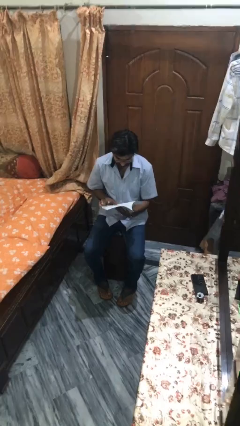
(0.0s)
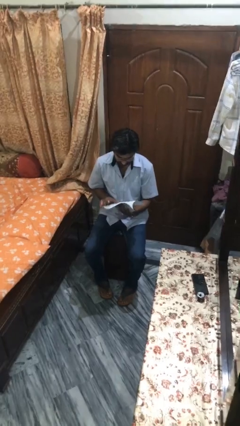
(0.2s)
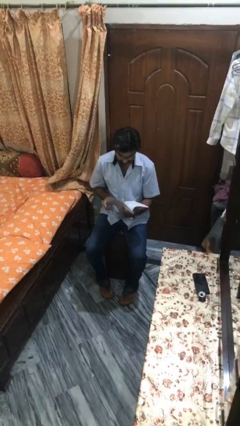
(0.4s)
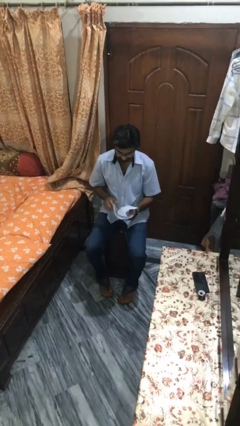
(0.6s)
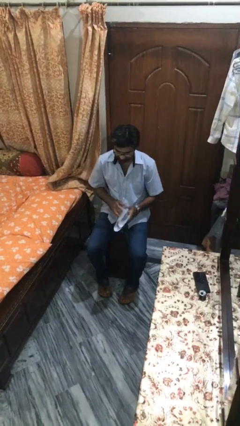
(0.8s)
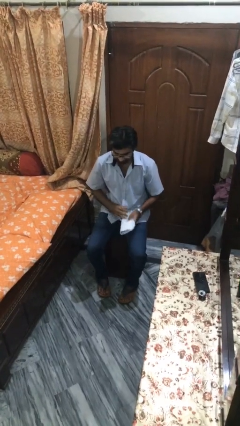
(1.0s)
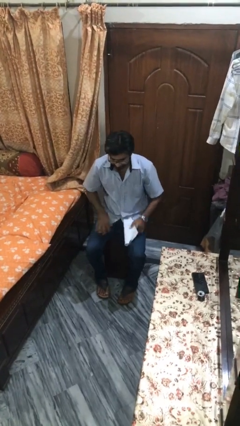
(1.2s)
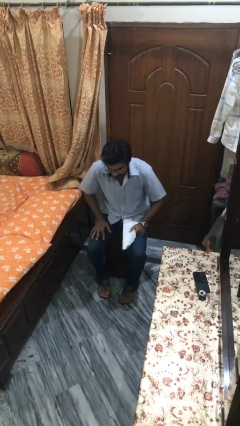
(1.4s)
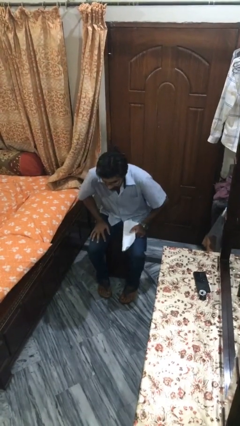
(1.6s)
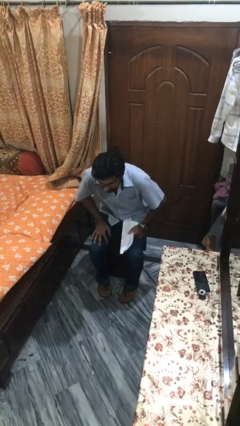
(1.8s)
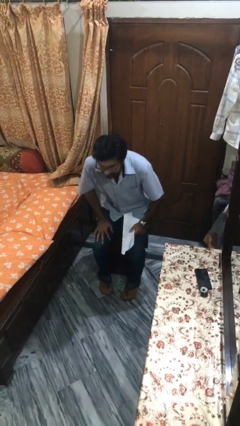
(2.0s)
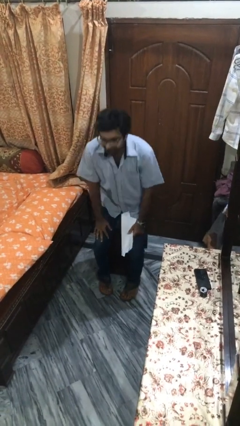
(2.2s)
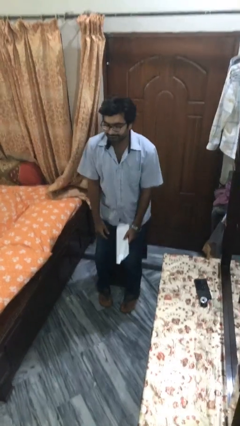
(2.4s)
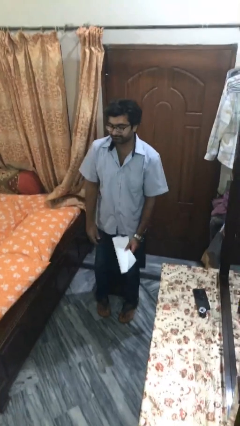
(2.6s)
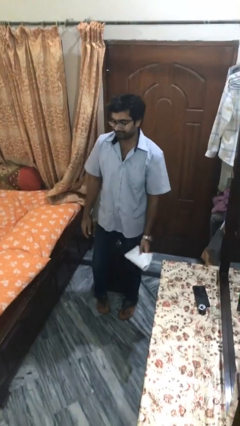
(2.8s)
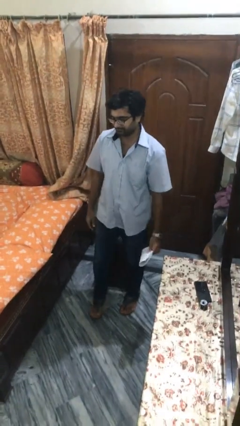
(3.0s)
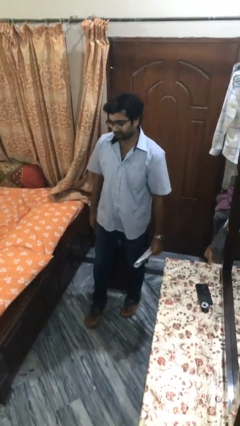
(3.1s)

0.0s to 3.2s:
person stands up

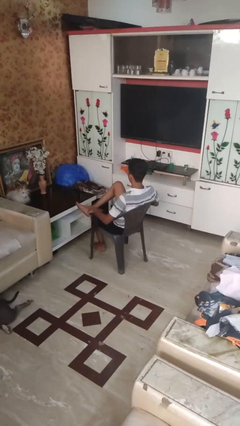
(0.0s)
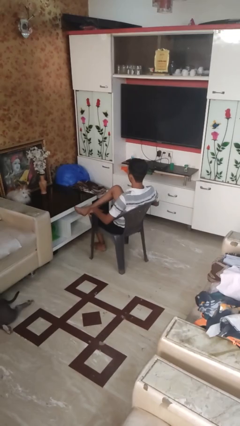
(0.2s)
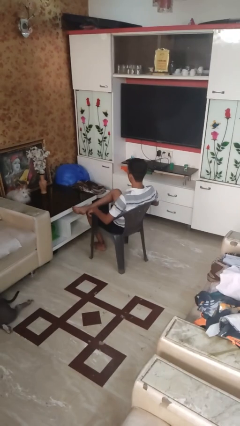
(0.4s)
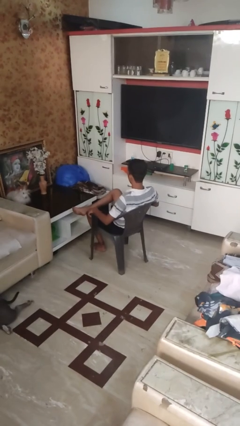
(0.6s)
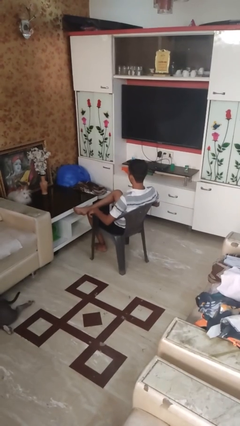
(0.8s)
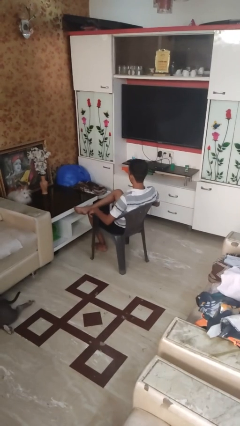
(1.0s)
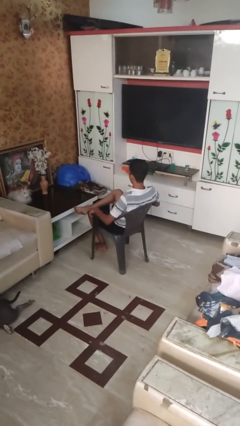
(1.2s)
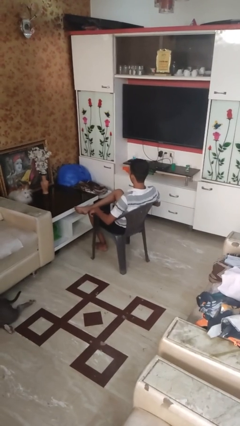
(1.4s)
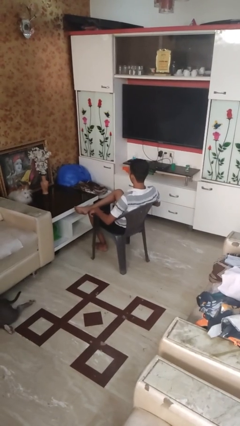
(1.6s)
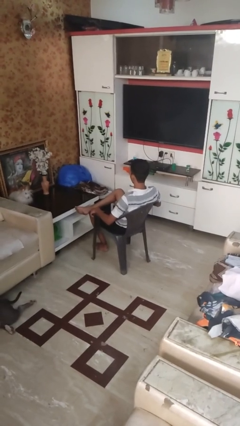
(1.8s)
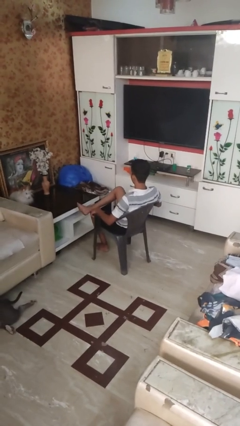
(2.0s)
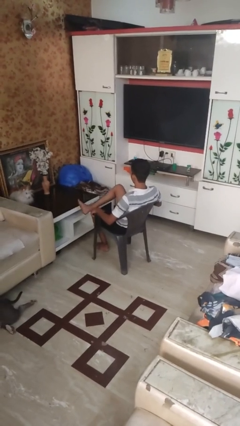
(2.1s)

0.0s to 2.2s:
person crosses legs

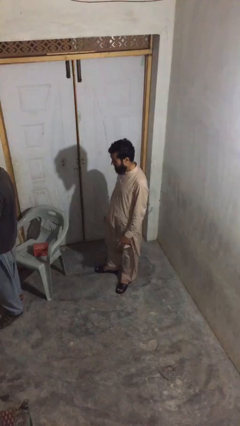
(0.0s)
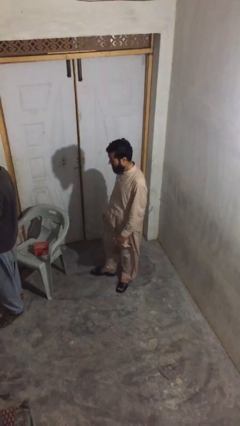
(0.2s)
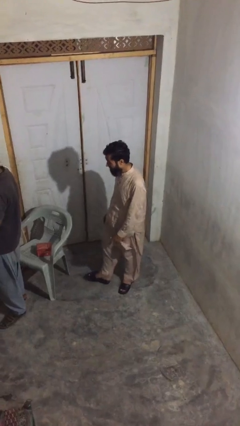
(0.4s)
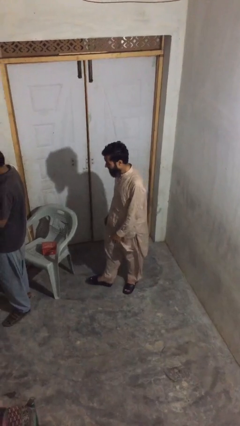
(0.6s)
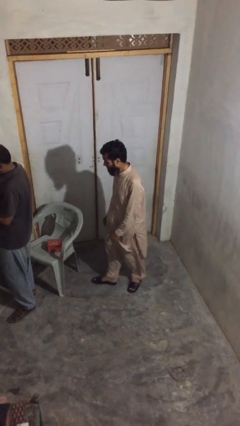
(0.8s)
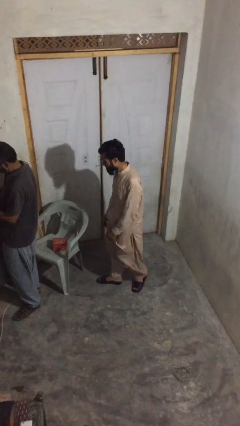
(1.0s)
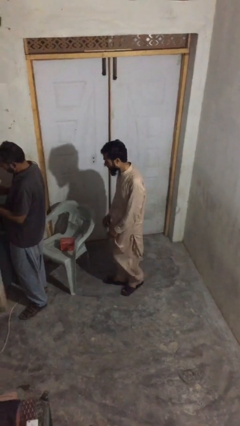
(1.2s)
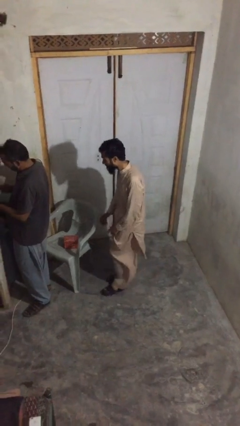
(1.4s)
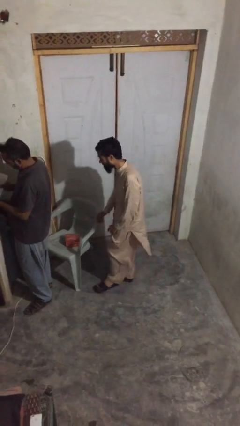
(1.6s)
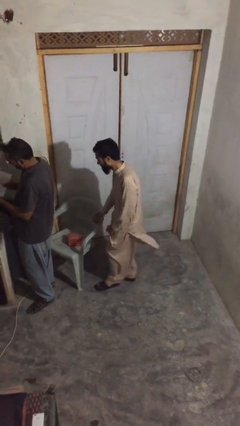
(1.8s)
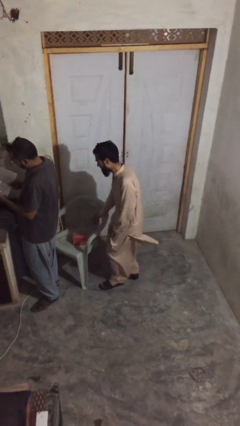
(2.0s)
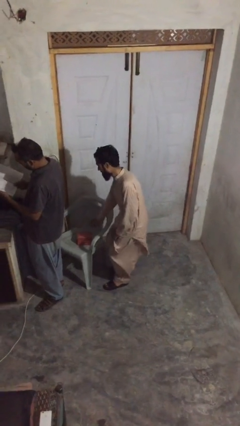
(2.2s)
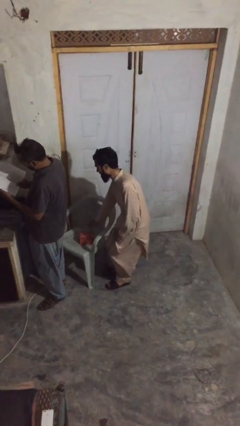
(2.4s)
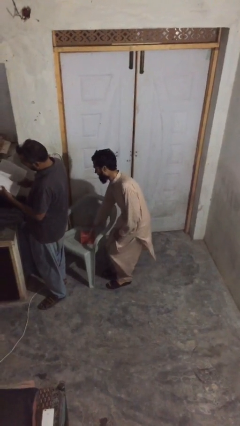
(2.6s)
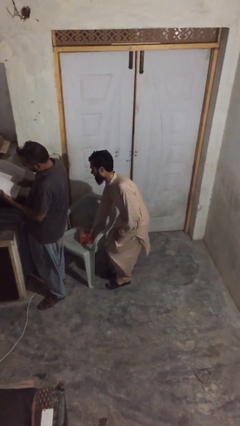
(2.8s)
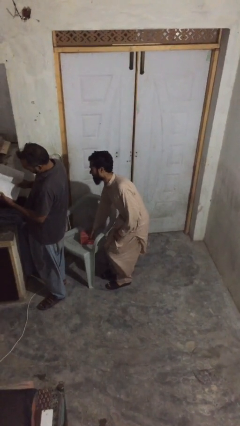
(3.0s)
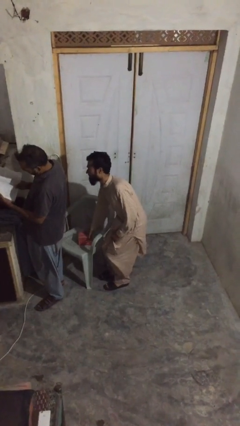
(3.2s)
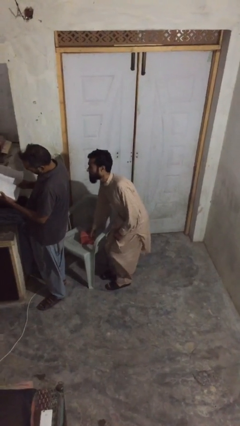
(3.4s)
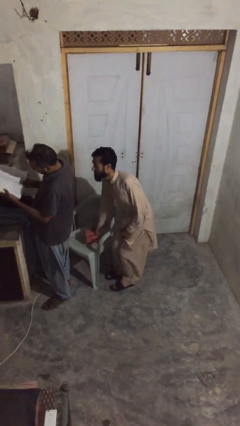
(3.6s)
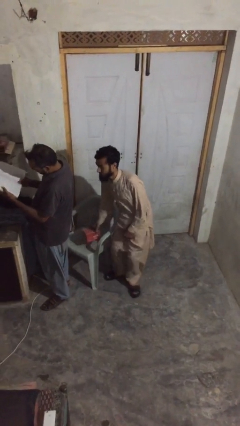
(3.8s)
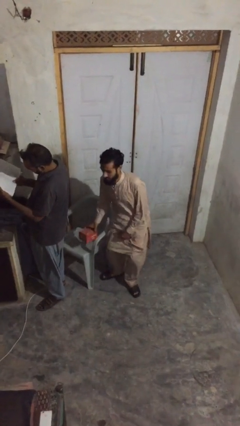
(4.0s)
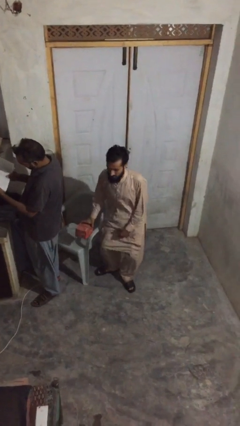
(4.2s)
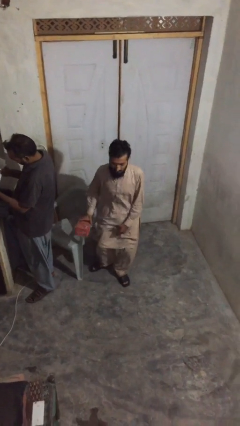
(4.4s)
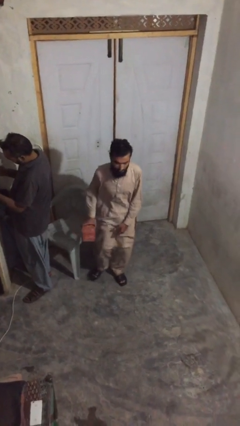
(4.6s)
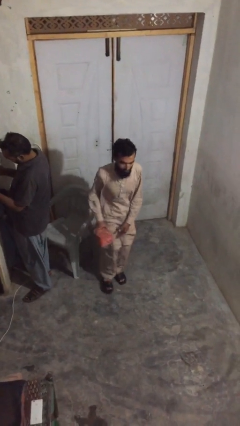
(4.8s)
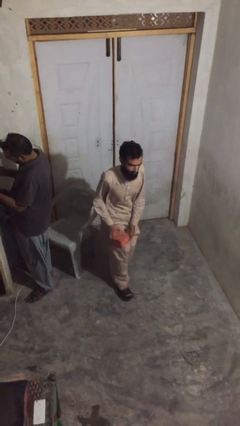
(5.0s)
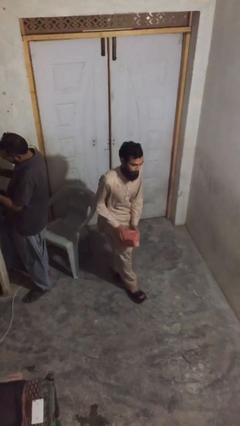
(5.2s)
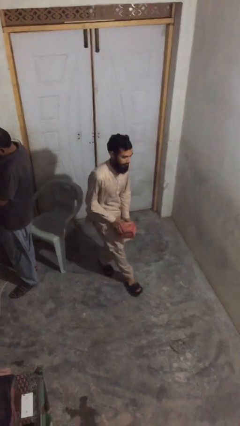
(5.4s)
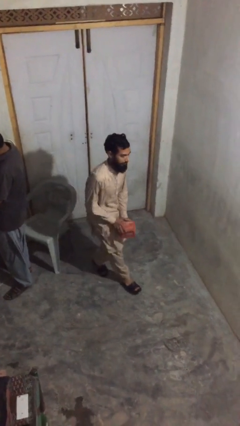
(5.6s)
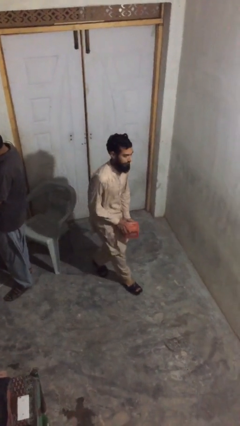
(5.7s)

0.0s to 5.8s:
person steals object from person

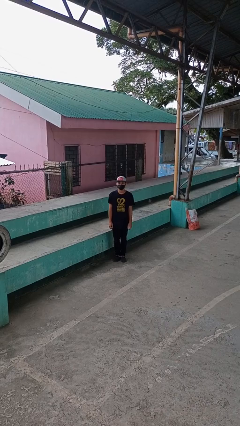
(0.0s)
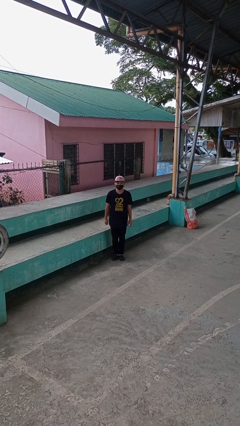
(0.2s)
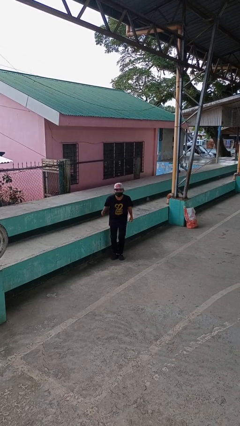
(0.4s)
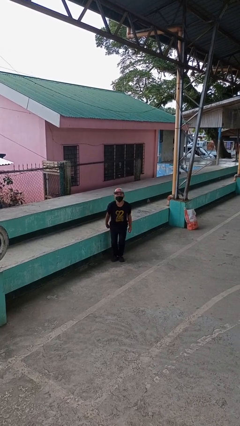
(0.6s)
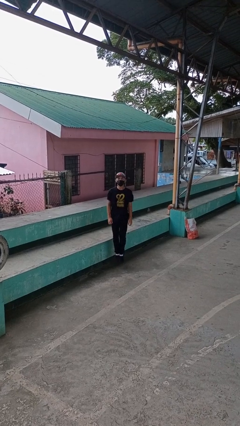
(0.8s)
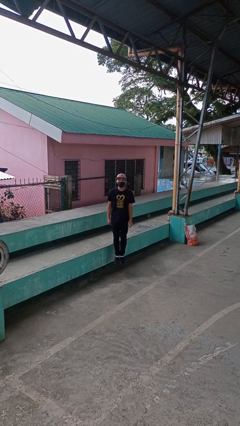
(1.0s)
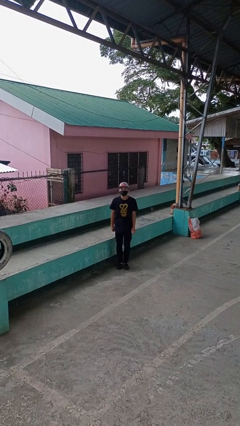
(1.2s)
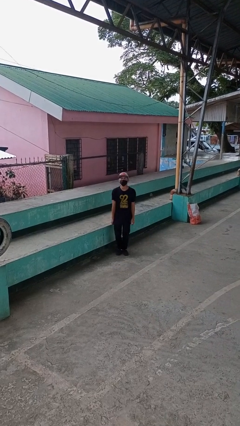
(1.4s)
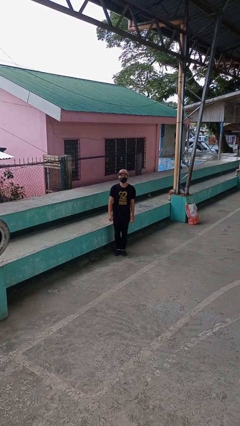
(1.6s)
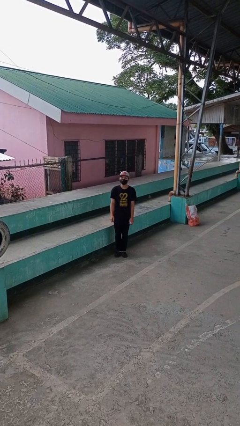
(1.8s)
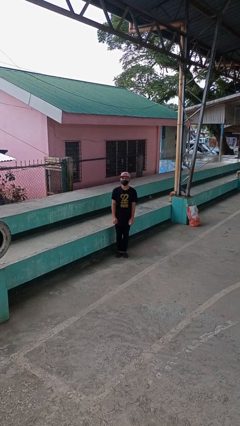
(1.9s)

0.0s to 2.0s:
person jumps

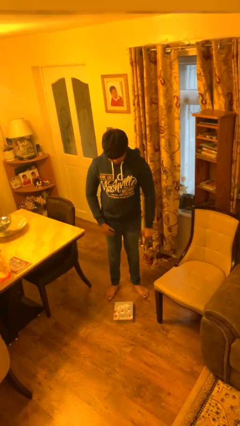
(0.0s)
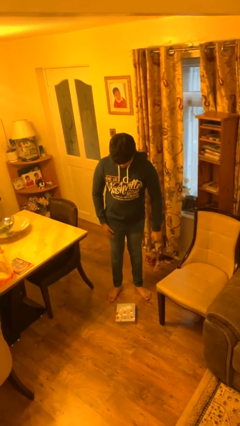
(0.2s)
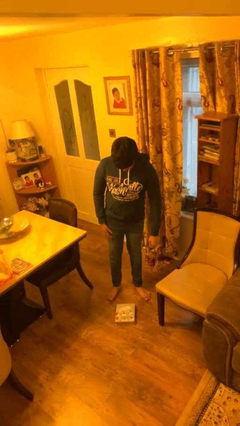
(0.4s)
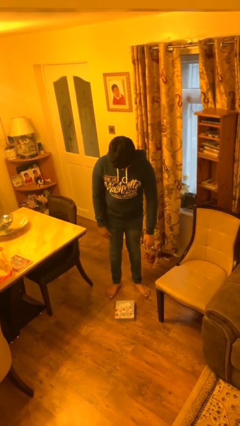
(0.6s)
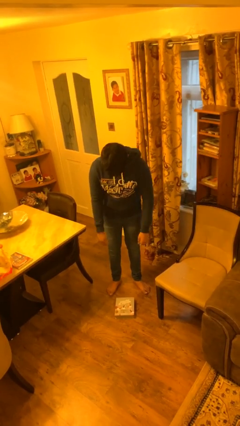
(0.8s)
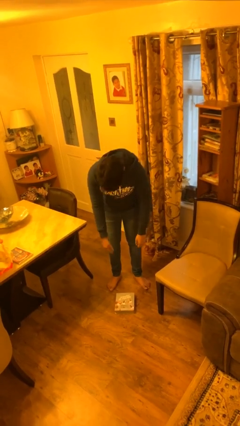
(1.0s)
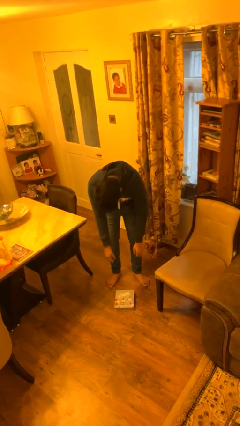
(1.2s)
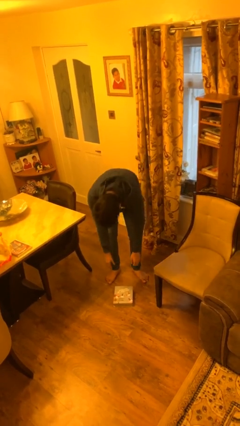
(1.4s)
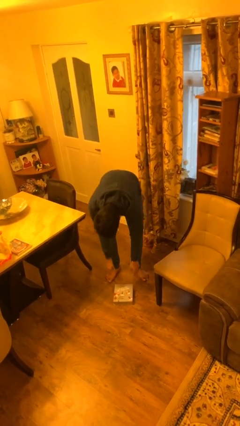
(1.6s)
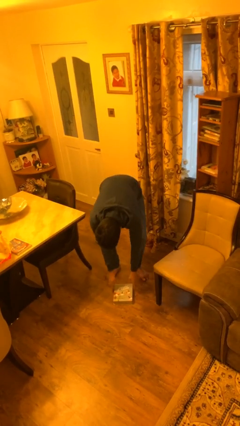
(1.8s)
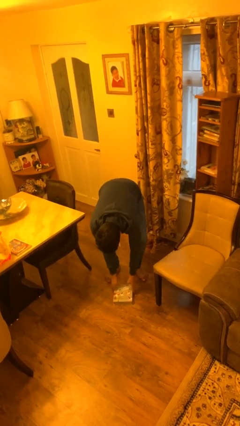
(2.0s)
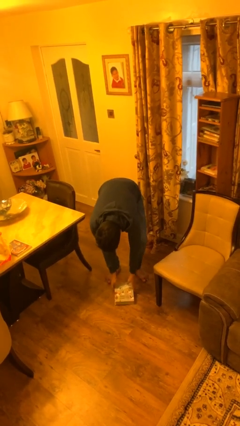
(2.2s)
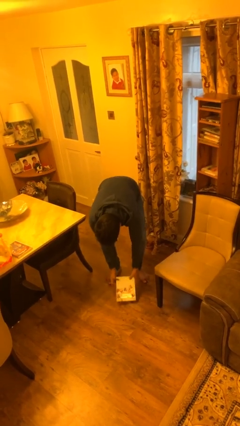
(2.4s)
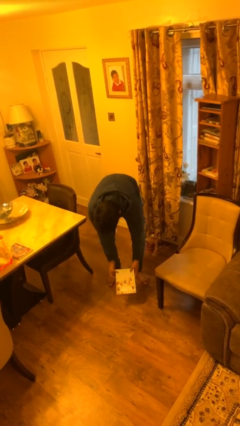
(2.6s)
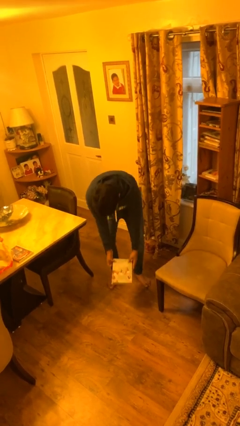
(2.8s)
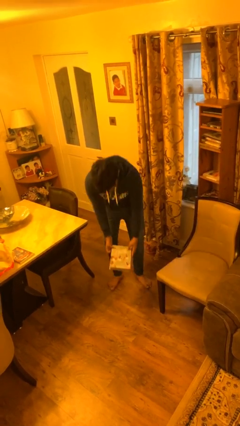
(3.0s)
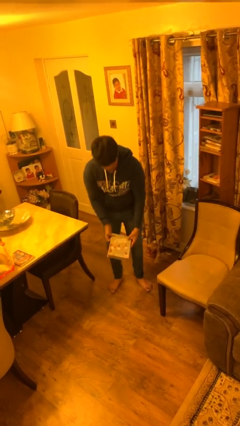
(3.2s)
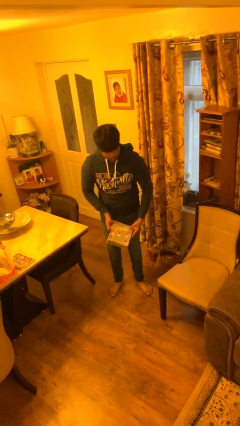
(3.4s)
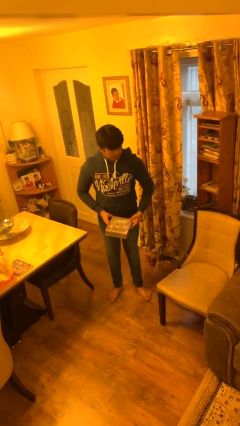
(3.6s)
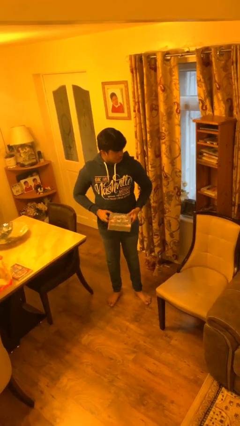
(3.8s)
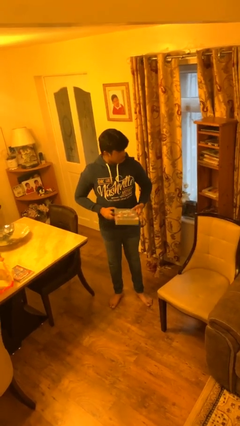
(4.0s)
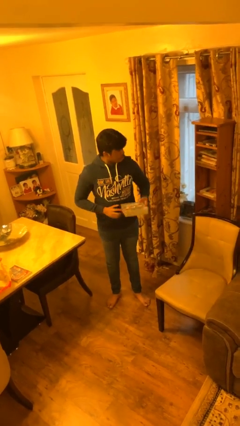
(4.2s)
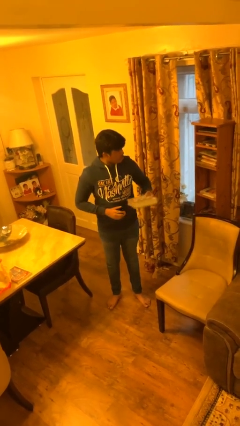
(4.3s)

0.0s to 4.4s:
person picks up object from floor
